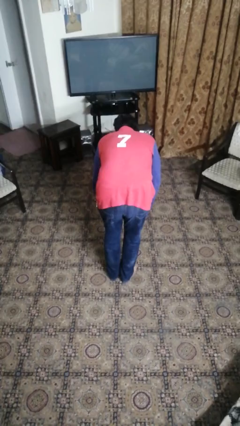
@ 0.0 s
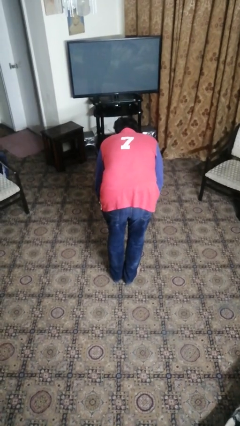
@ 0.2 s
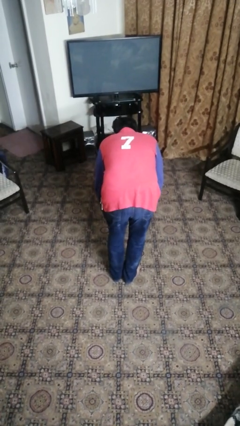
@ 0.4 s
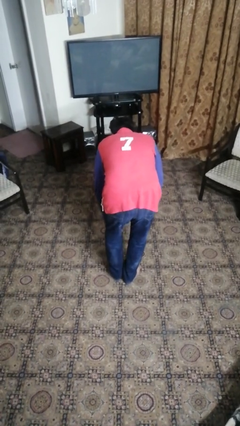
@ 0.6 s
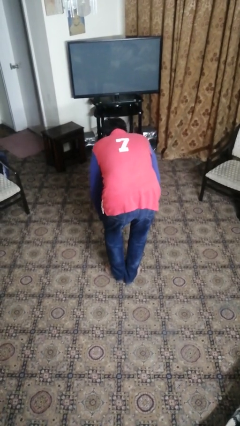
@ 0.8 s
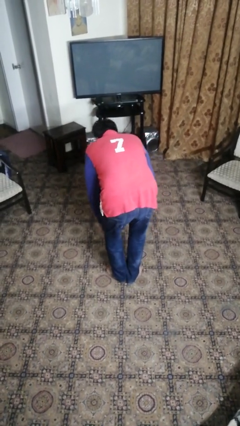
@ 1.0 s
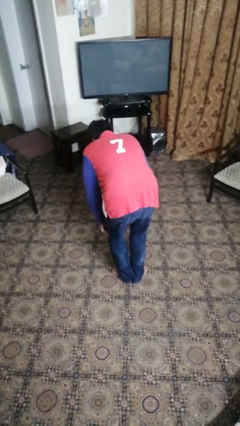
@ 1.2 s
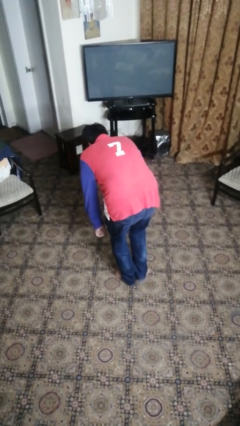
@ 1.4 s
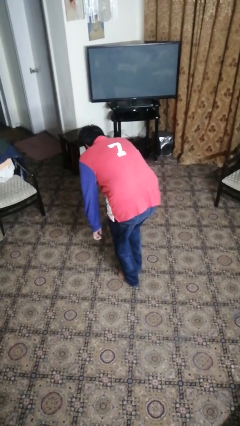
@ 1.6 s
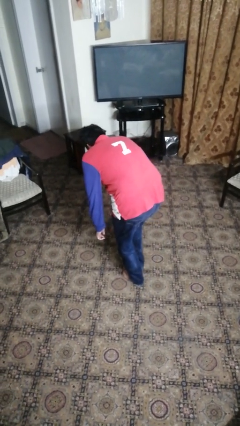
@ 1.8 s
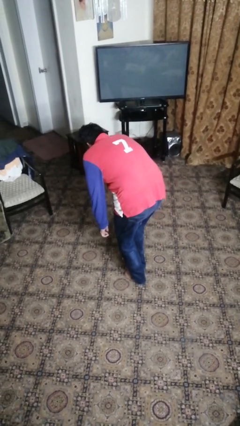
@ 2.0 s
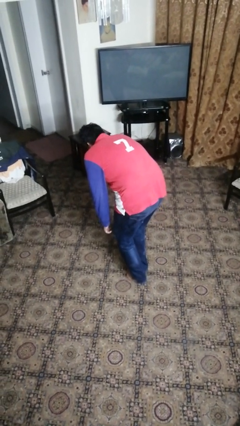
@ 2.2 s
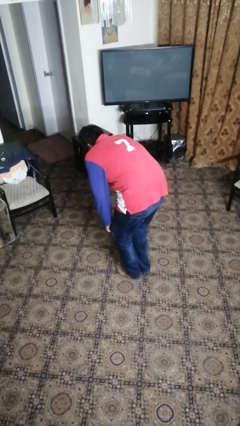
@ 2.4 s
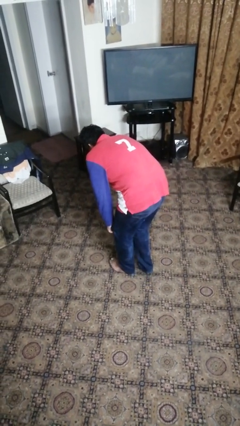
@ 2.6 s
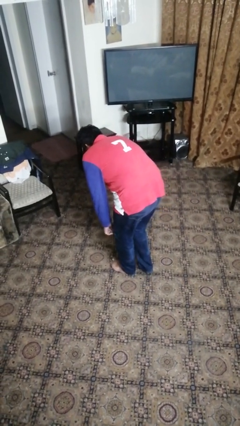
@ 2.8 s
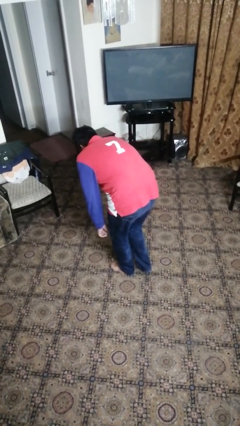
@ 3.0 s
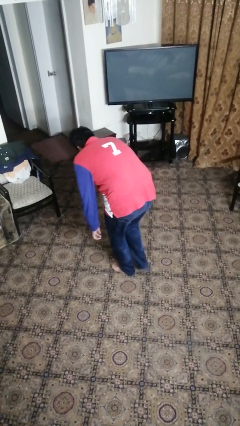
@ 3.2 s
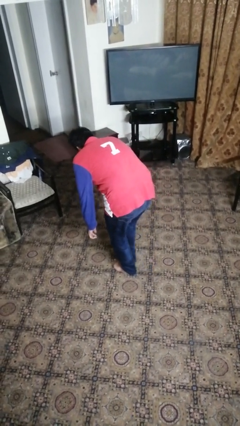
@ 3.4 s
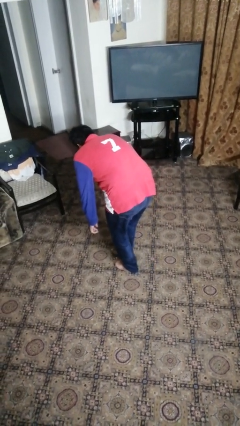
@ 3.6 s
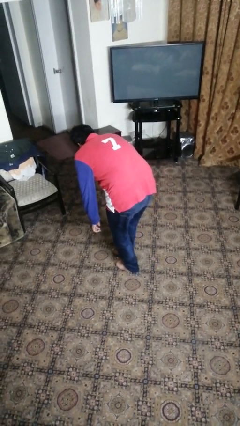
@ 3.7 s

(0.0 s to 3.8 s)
person walks tiptoe

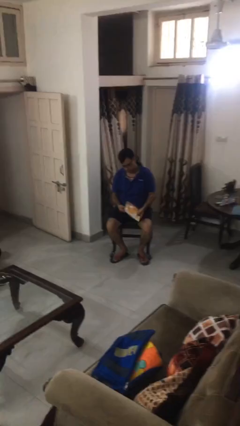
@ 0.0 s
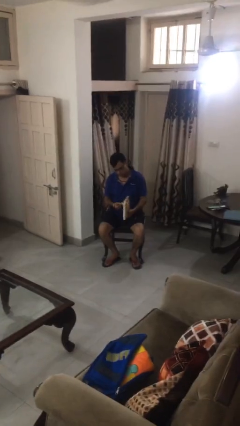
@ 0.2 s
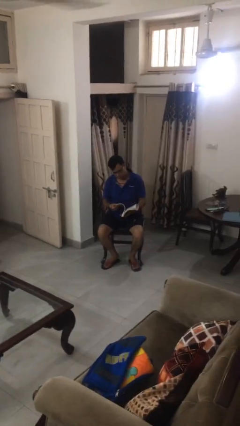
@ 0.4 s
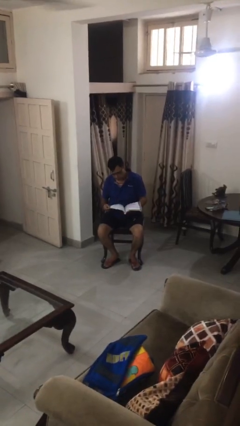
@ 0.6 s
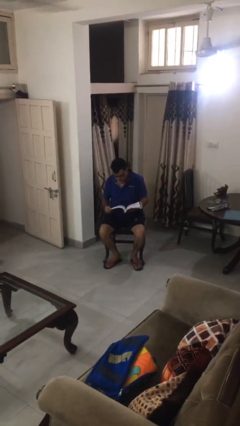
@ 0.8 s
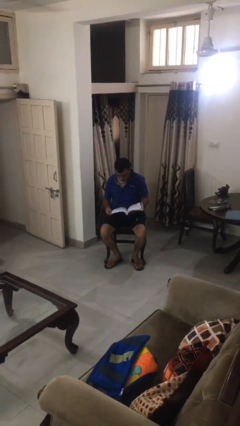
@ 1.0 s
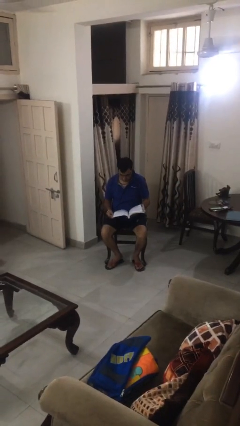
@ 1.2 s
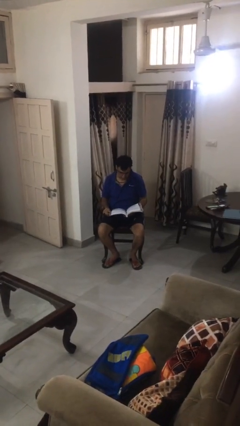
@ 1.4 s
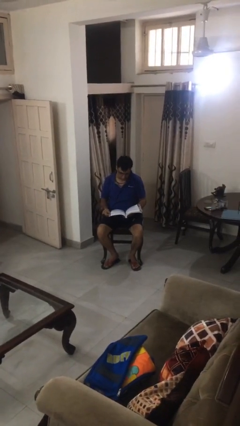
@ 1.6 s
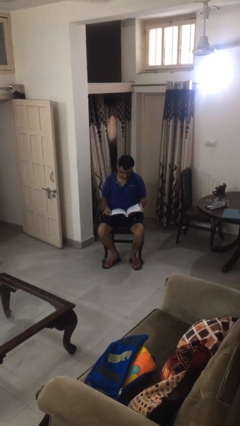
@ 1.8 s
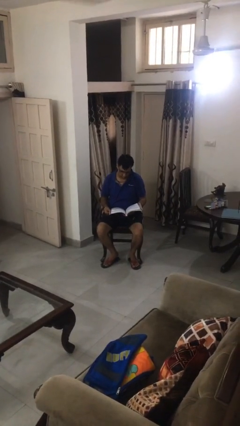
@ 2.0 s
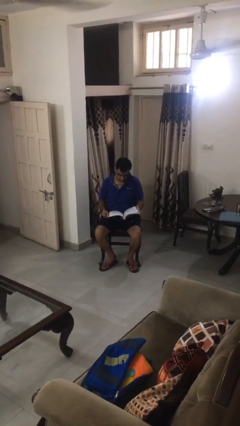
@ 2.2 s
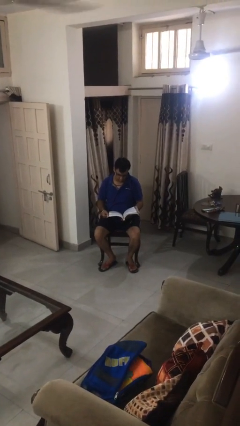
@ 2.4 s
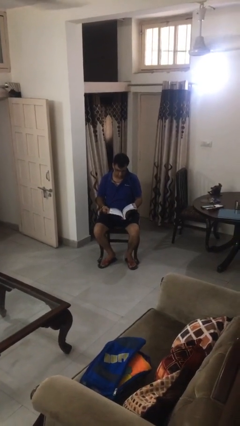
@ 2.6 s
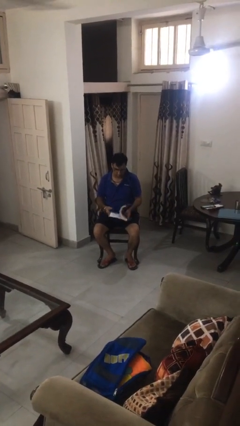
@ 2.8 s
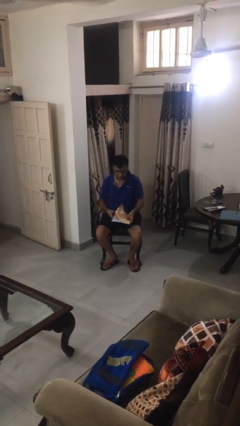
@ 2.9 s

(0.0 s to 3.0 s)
person reads book

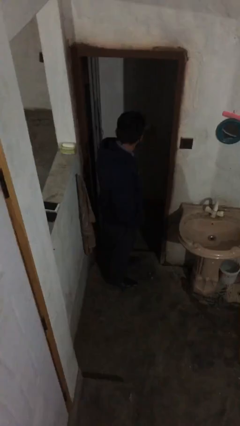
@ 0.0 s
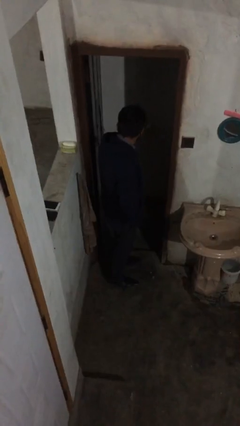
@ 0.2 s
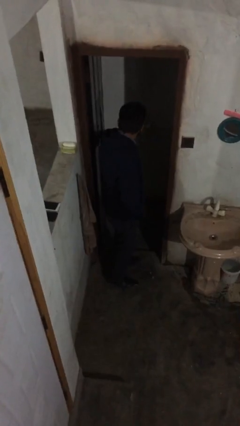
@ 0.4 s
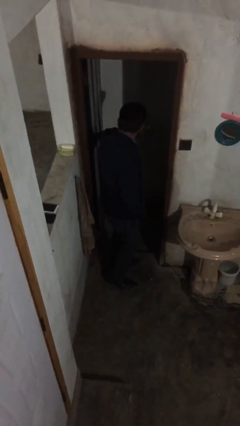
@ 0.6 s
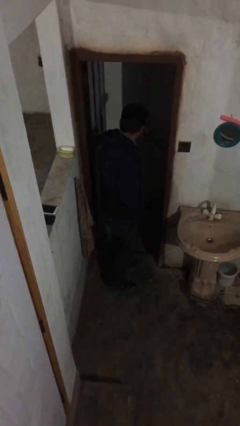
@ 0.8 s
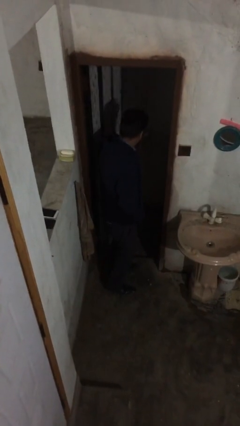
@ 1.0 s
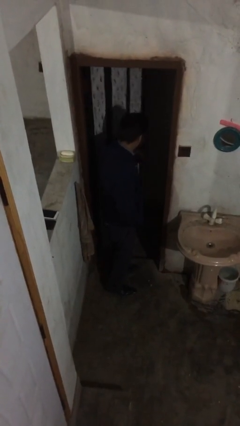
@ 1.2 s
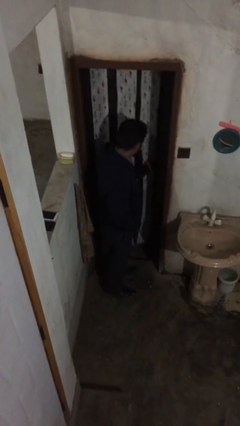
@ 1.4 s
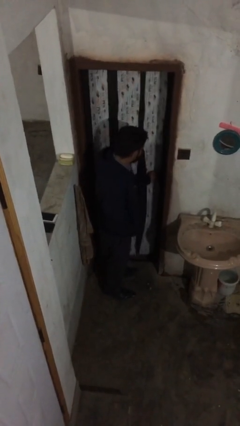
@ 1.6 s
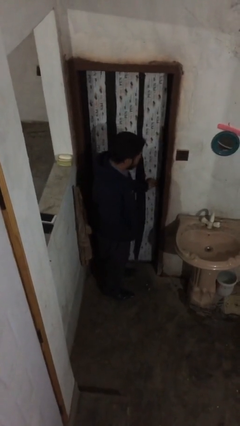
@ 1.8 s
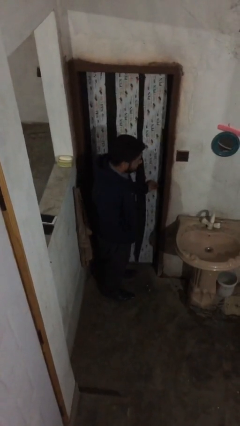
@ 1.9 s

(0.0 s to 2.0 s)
person closes facility door

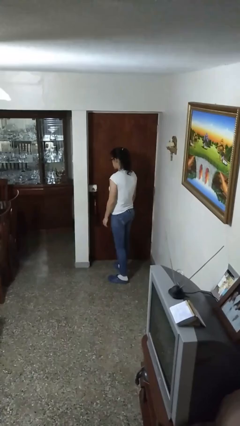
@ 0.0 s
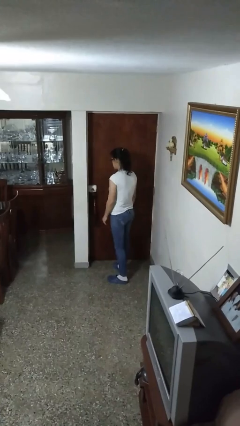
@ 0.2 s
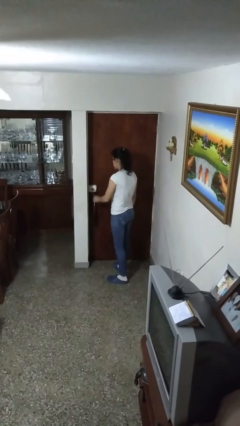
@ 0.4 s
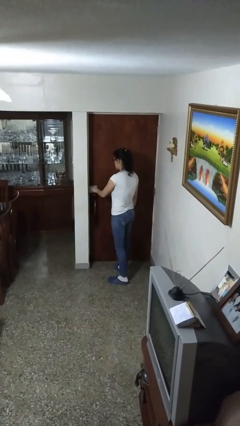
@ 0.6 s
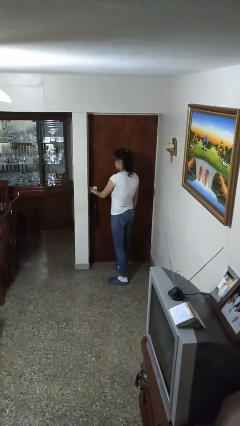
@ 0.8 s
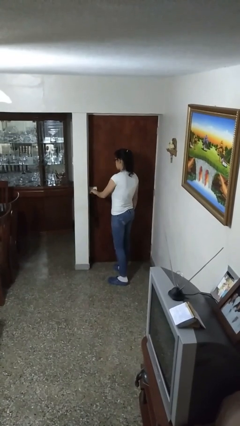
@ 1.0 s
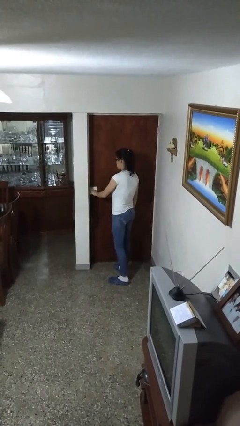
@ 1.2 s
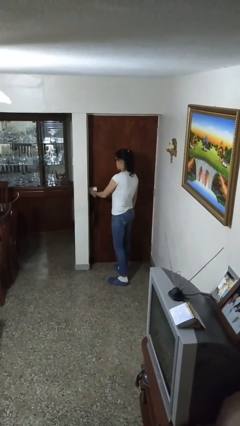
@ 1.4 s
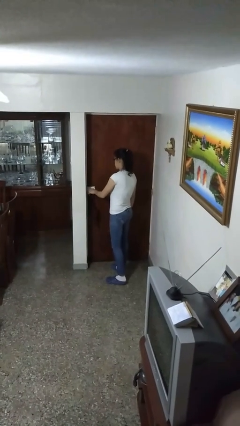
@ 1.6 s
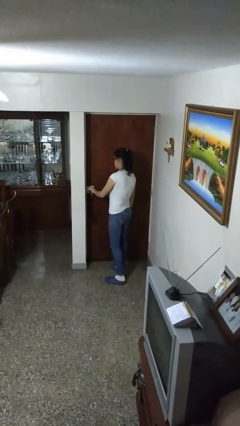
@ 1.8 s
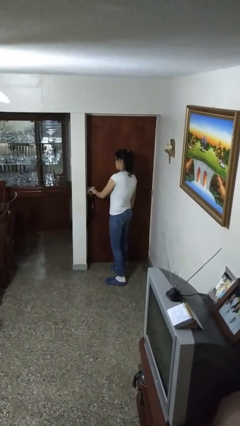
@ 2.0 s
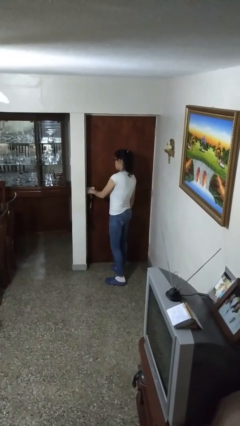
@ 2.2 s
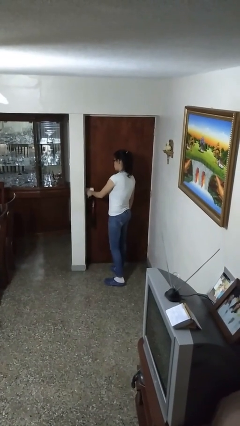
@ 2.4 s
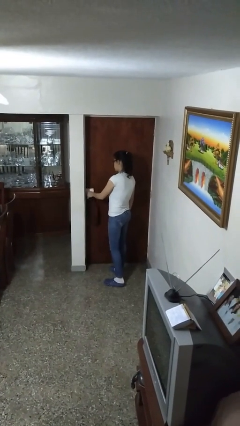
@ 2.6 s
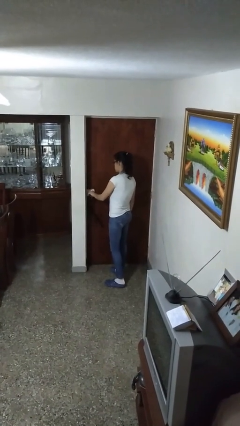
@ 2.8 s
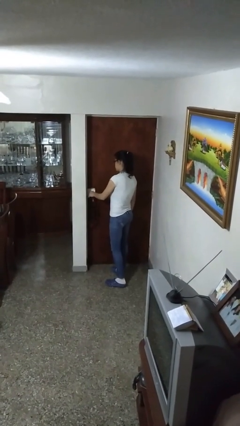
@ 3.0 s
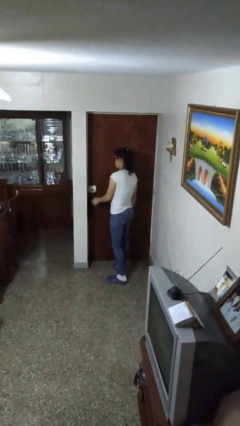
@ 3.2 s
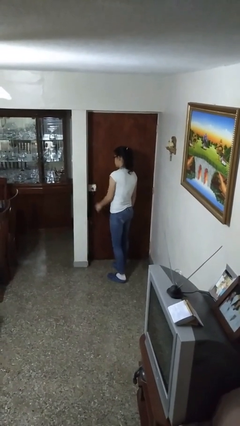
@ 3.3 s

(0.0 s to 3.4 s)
person locks door with keys

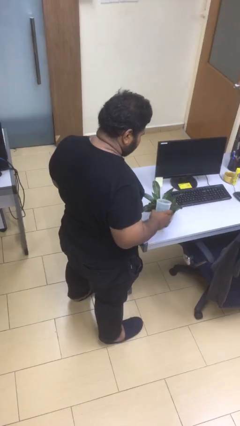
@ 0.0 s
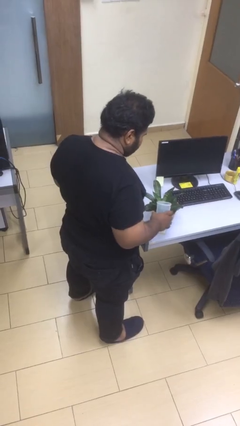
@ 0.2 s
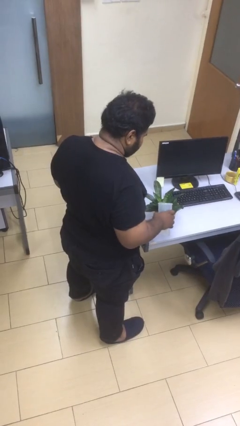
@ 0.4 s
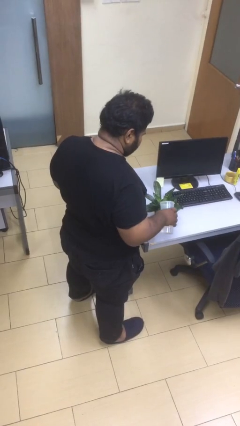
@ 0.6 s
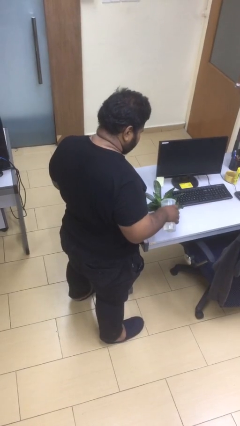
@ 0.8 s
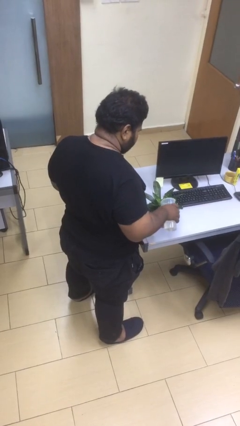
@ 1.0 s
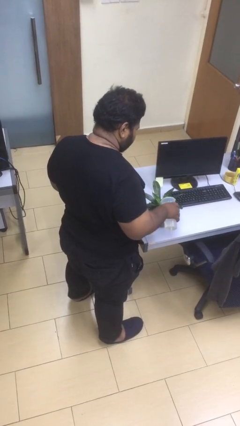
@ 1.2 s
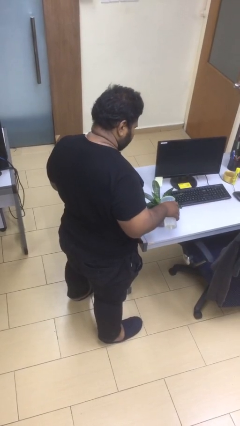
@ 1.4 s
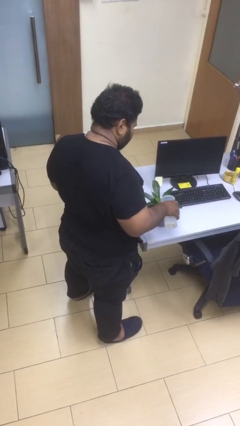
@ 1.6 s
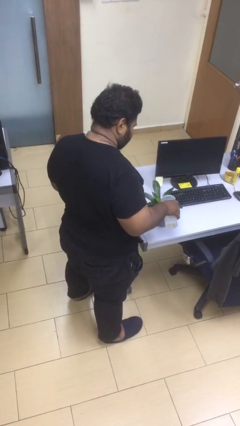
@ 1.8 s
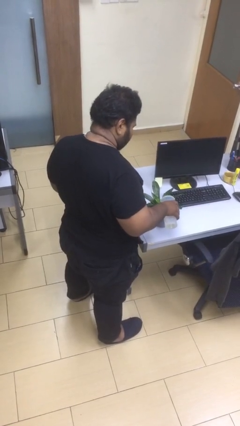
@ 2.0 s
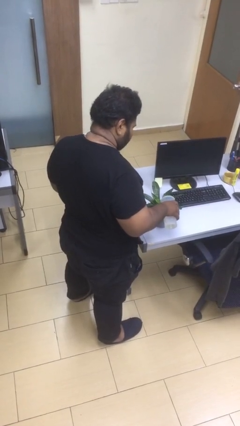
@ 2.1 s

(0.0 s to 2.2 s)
person waters houseplant

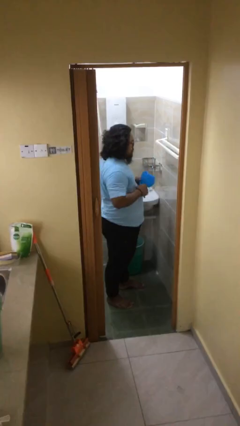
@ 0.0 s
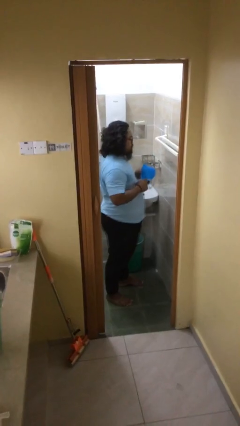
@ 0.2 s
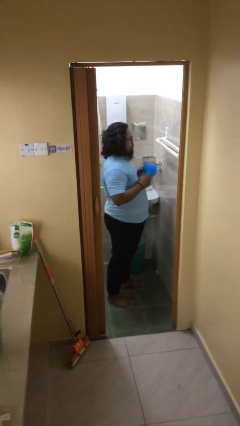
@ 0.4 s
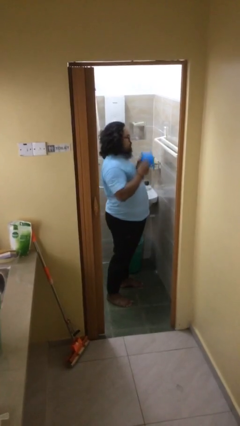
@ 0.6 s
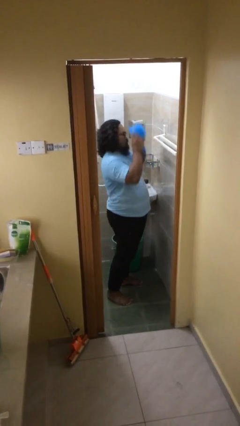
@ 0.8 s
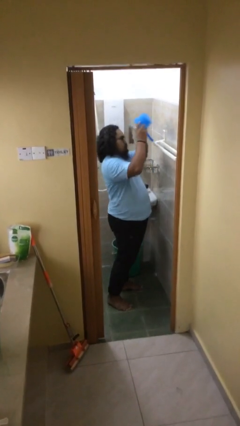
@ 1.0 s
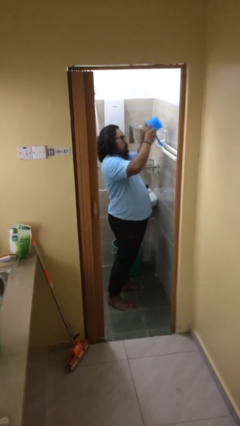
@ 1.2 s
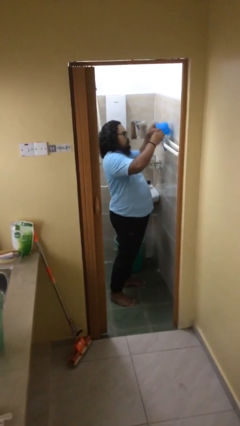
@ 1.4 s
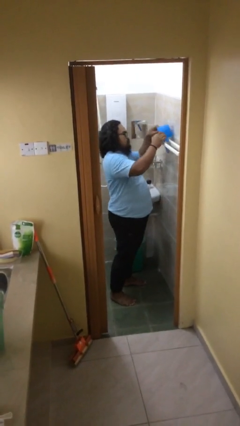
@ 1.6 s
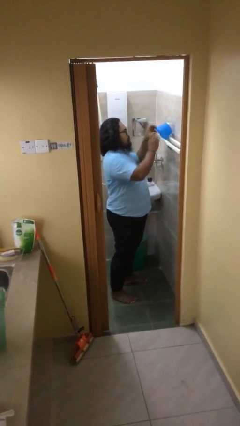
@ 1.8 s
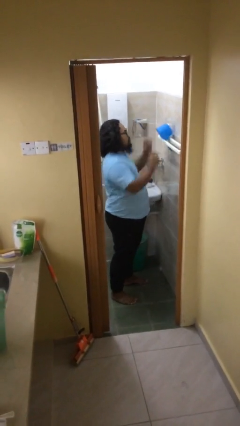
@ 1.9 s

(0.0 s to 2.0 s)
person puts down object on countertop

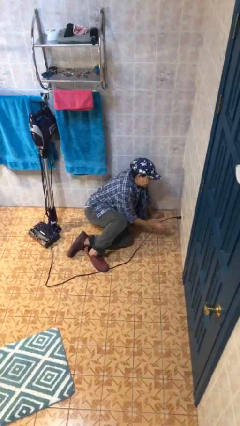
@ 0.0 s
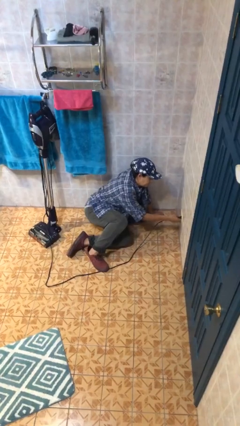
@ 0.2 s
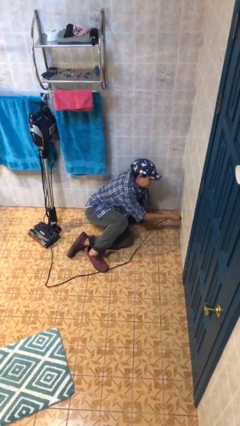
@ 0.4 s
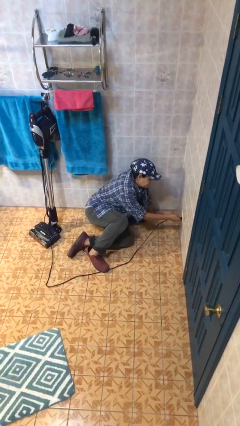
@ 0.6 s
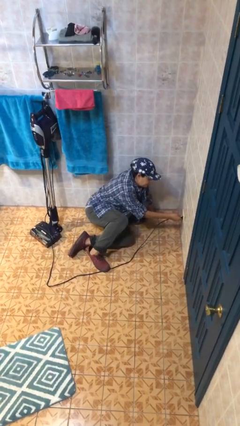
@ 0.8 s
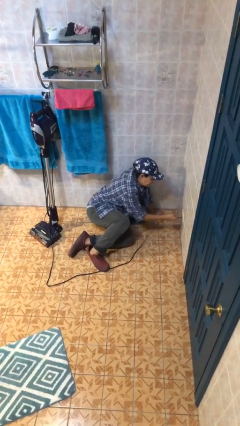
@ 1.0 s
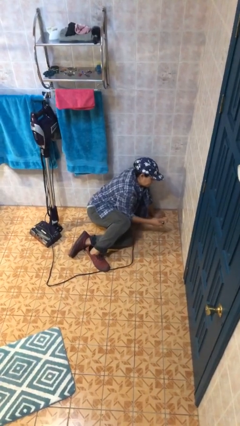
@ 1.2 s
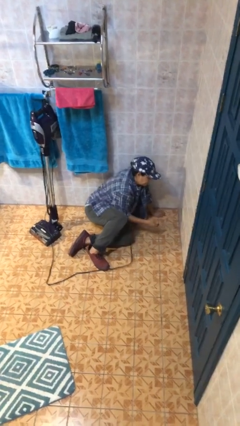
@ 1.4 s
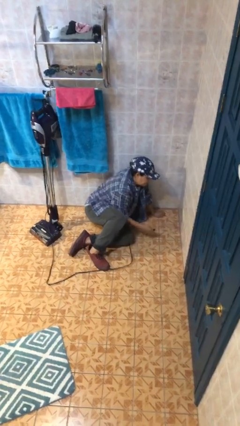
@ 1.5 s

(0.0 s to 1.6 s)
person unplugs from electrical socket
